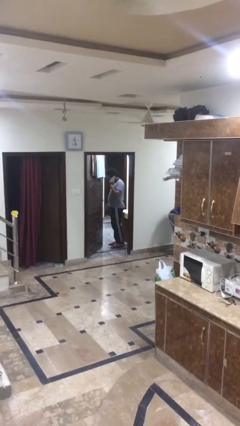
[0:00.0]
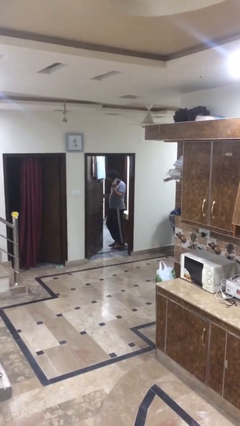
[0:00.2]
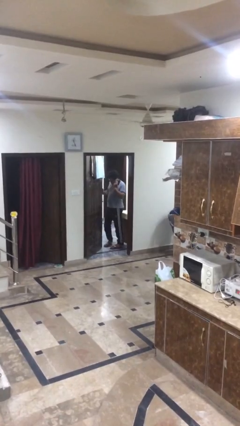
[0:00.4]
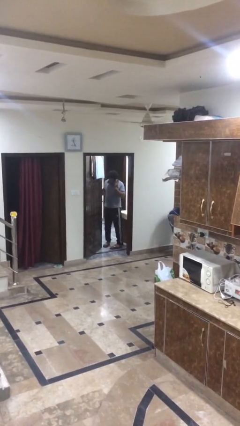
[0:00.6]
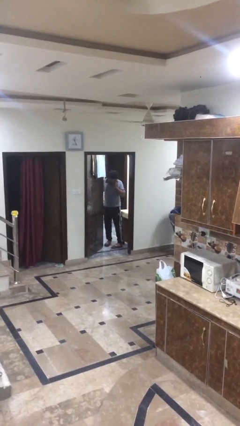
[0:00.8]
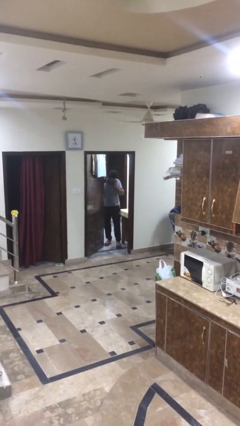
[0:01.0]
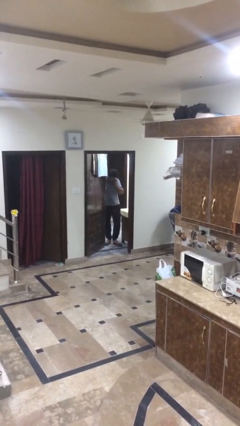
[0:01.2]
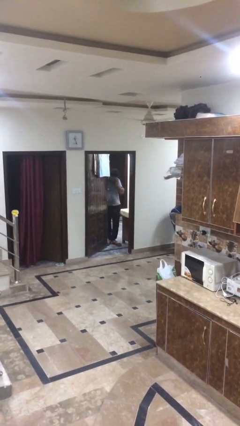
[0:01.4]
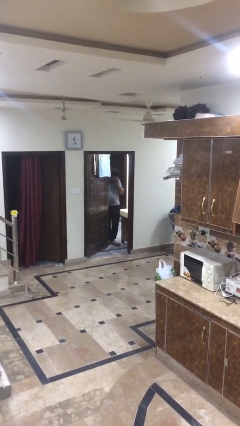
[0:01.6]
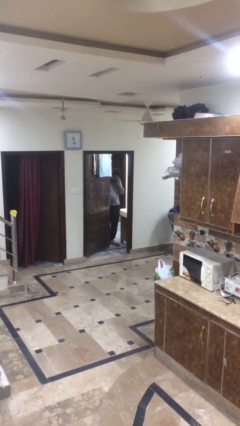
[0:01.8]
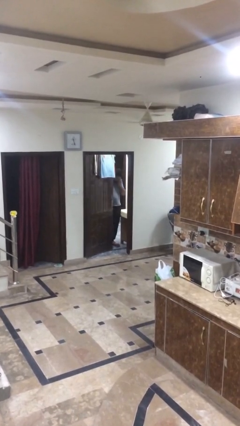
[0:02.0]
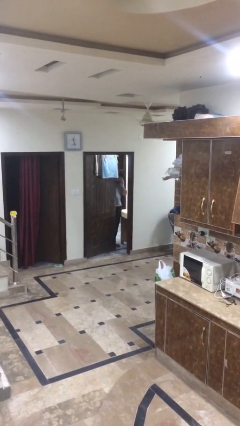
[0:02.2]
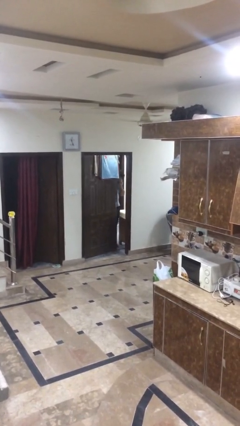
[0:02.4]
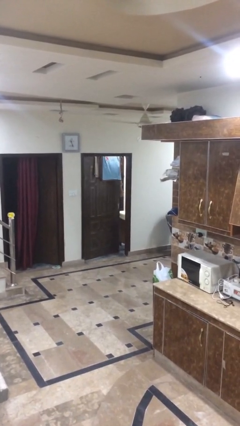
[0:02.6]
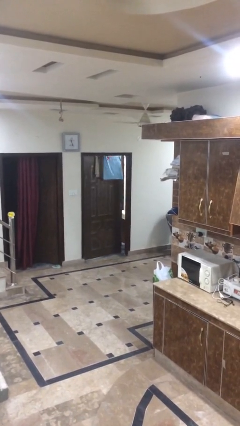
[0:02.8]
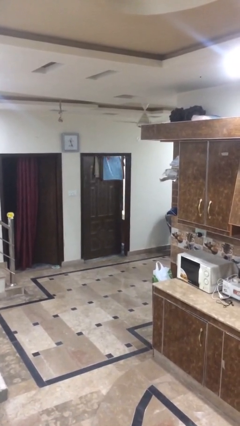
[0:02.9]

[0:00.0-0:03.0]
person closes facility door

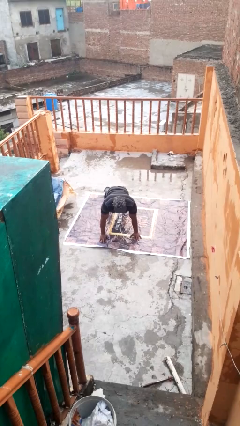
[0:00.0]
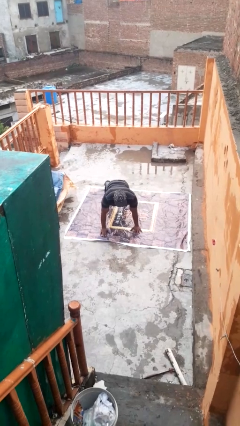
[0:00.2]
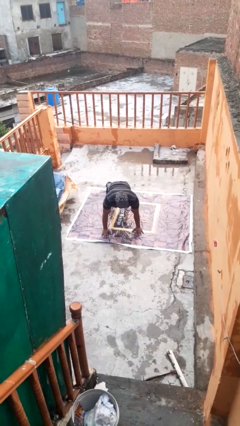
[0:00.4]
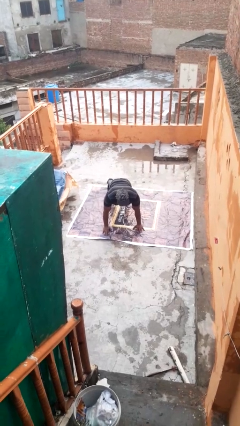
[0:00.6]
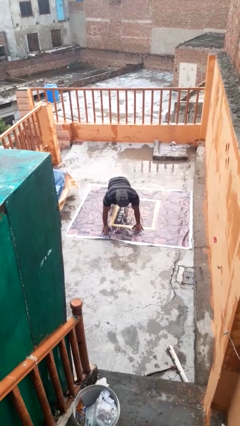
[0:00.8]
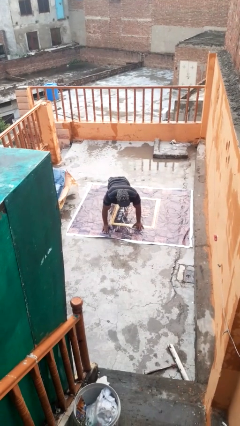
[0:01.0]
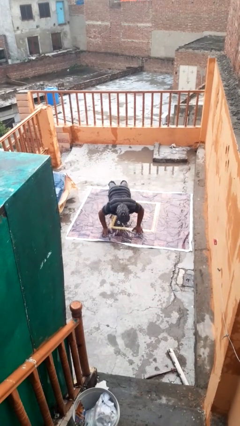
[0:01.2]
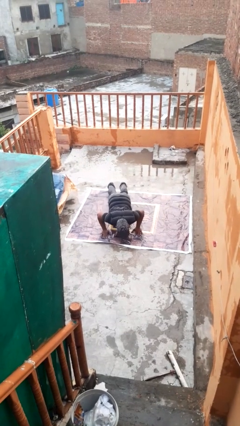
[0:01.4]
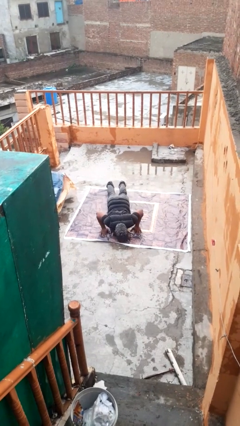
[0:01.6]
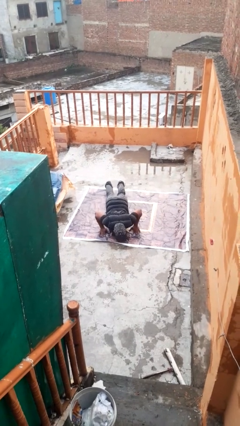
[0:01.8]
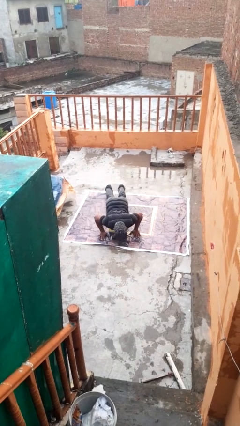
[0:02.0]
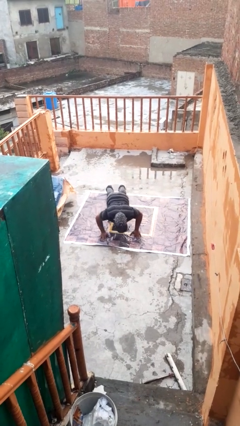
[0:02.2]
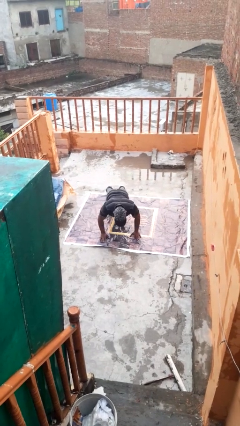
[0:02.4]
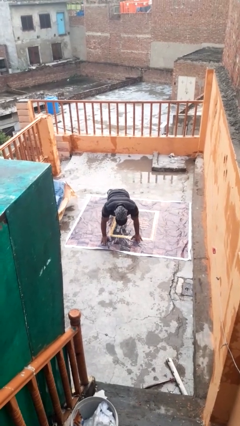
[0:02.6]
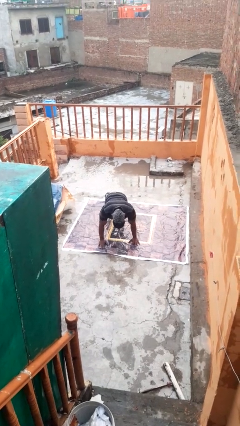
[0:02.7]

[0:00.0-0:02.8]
person exercises with pushup

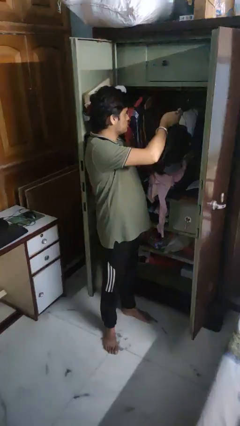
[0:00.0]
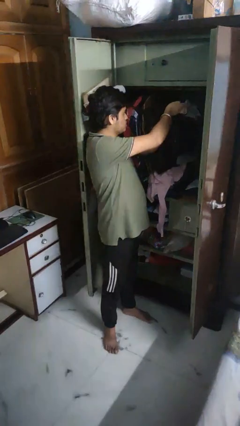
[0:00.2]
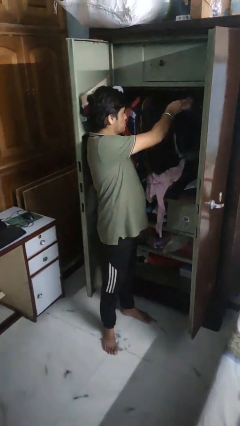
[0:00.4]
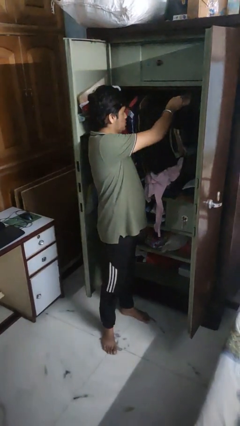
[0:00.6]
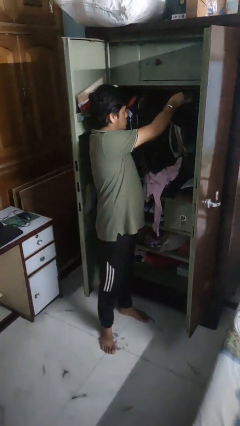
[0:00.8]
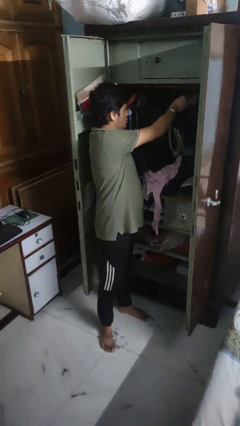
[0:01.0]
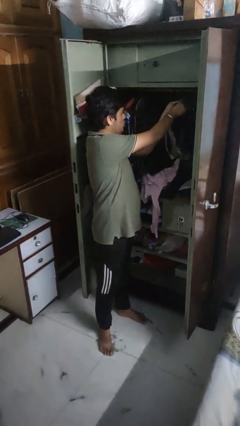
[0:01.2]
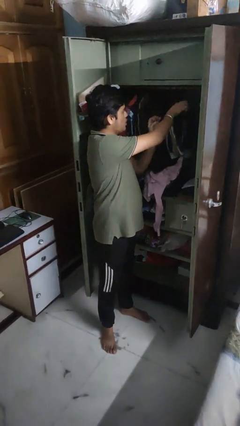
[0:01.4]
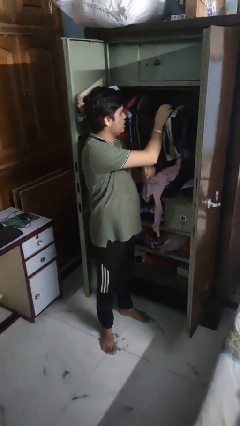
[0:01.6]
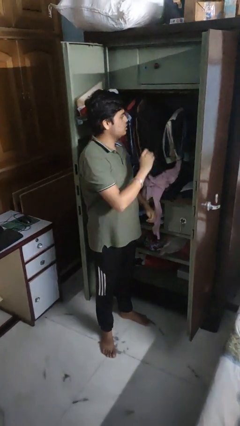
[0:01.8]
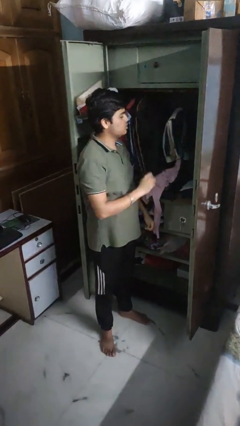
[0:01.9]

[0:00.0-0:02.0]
person puts clothes into closet

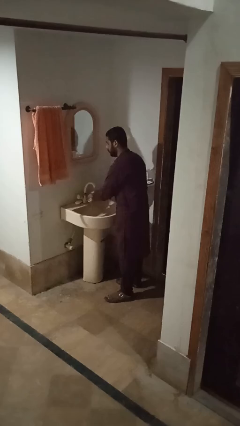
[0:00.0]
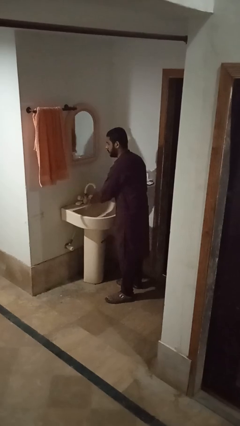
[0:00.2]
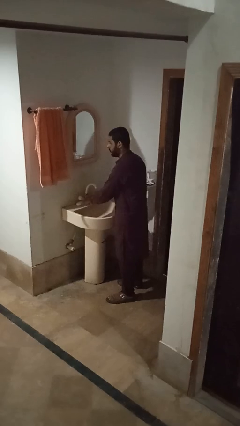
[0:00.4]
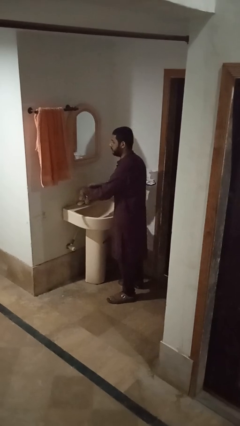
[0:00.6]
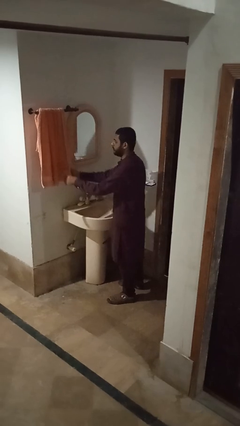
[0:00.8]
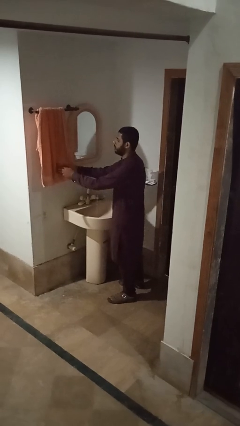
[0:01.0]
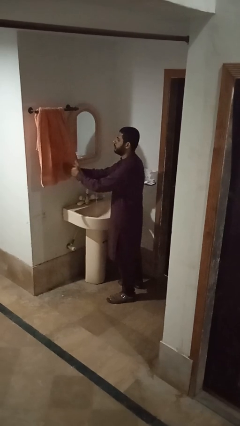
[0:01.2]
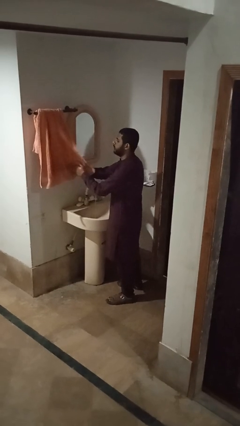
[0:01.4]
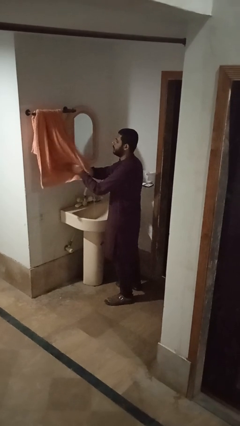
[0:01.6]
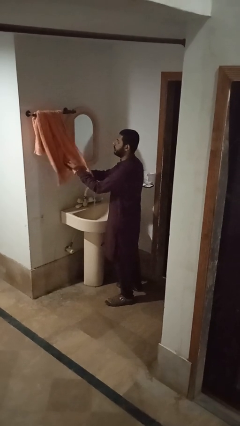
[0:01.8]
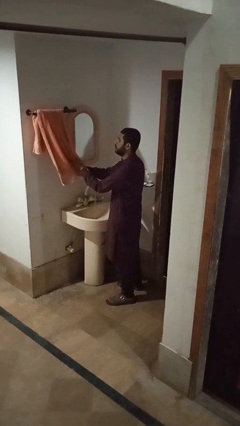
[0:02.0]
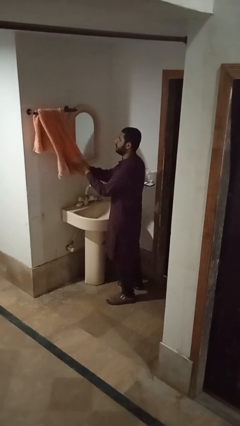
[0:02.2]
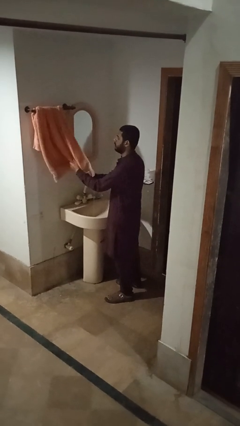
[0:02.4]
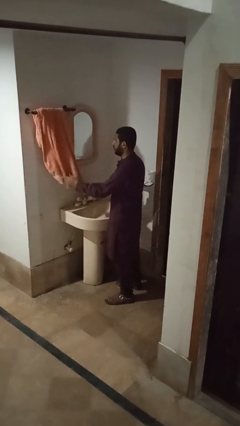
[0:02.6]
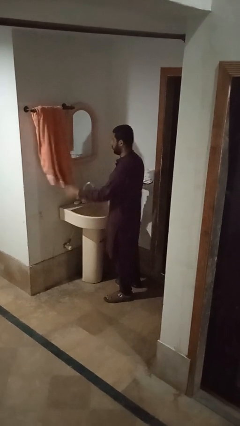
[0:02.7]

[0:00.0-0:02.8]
person dries hands with towel

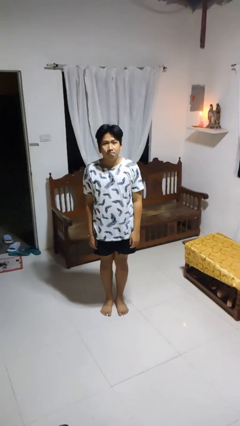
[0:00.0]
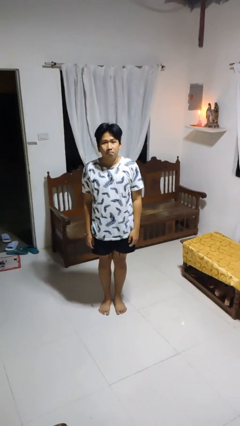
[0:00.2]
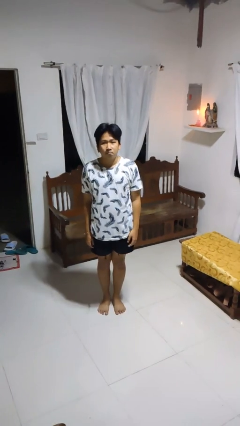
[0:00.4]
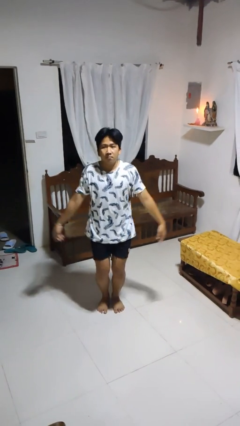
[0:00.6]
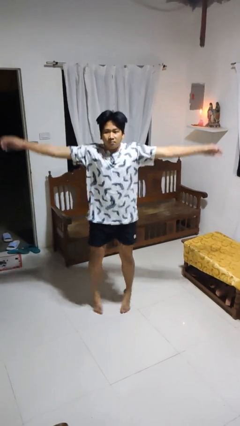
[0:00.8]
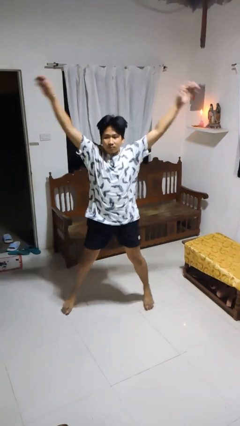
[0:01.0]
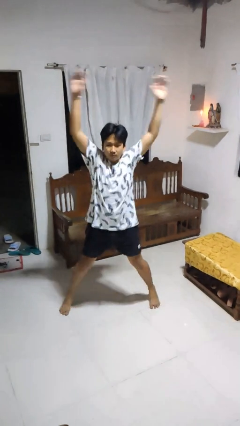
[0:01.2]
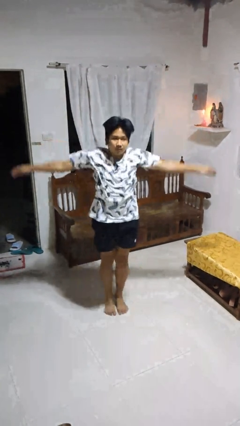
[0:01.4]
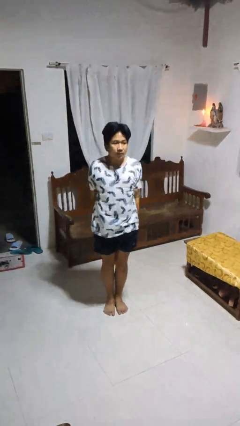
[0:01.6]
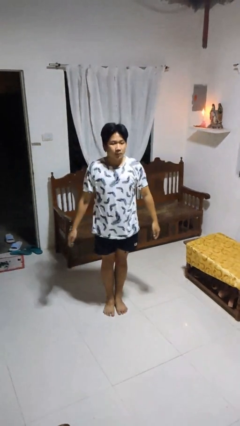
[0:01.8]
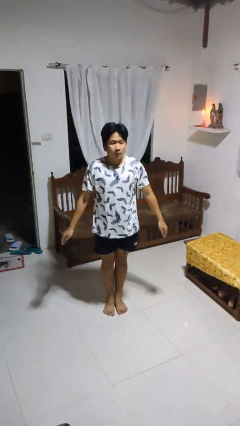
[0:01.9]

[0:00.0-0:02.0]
person exercises with jumping jacks

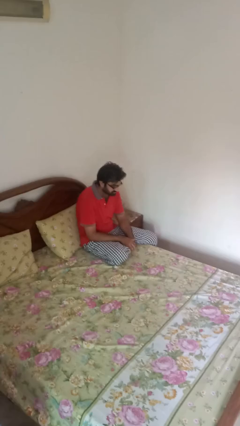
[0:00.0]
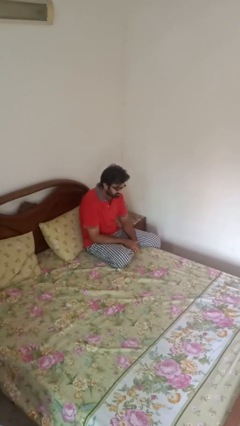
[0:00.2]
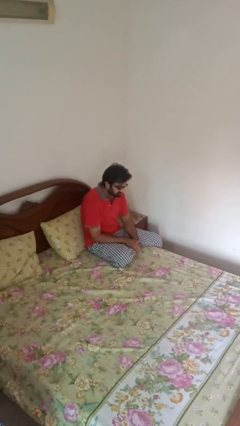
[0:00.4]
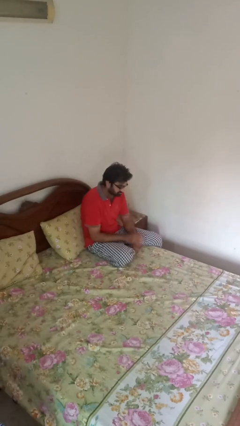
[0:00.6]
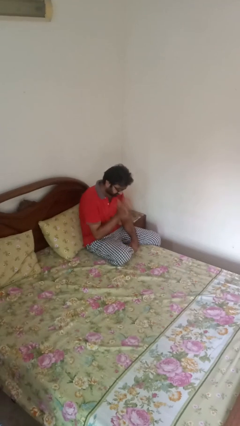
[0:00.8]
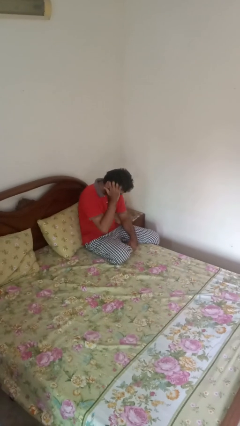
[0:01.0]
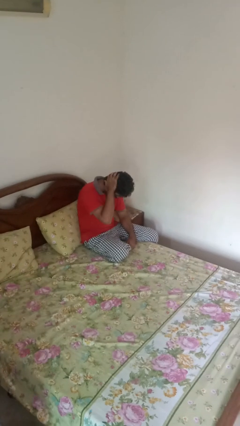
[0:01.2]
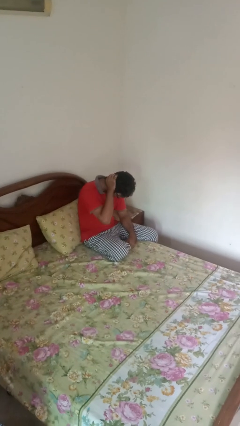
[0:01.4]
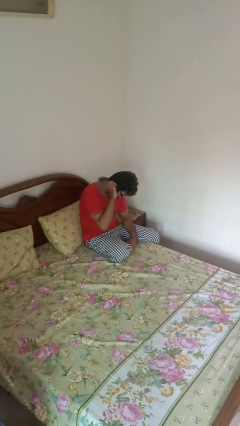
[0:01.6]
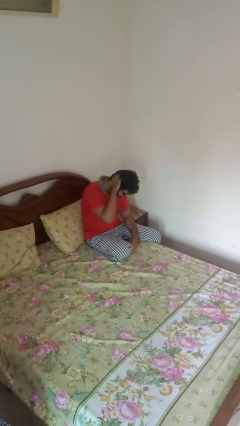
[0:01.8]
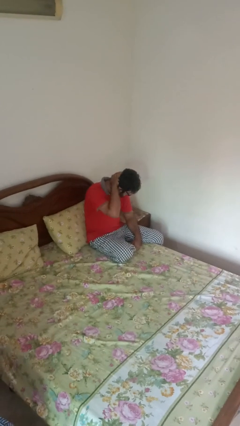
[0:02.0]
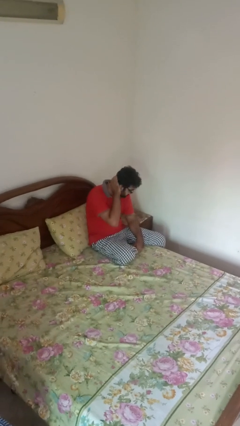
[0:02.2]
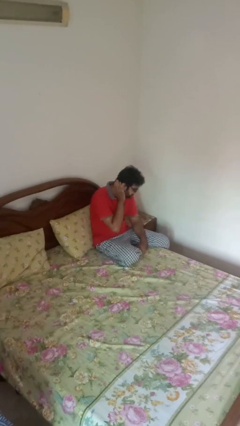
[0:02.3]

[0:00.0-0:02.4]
person strokes hair

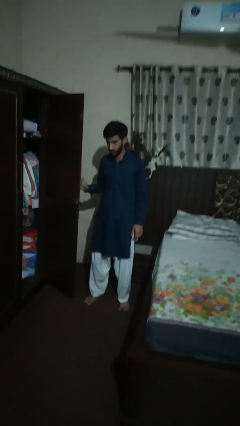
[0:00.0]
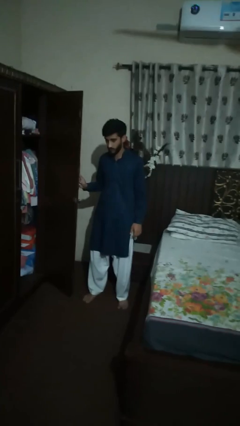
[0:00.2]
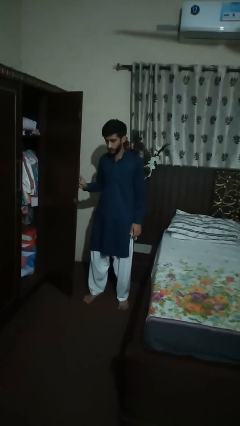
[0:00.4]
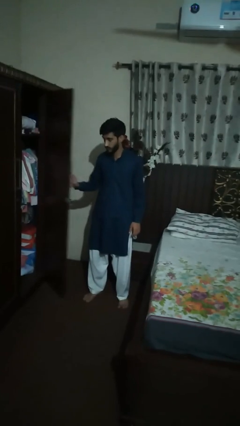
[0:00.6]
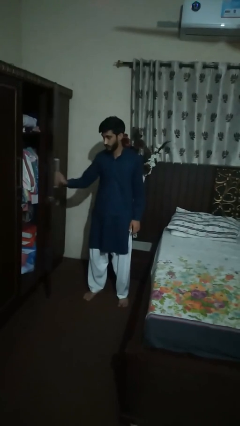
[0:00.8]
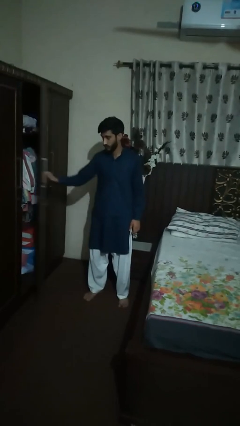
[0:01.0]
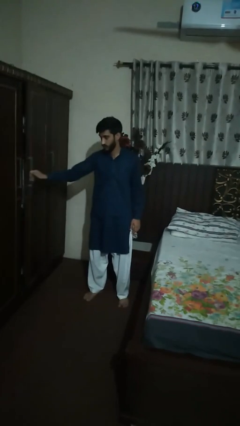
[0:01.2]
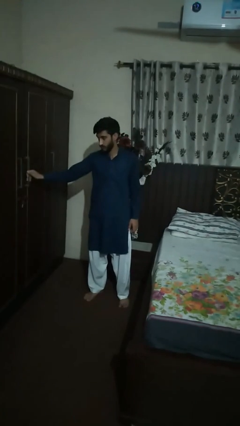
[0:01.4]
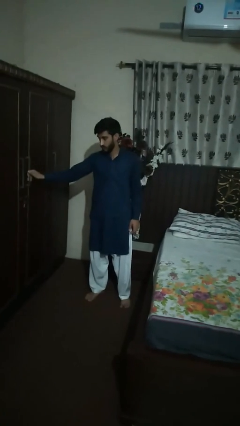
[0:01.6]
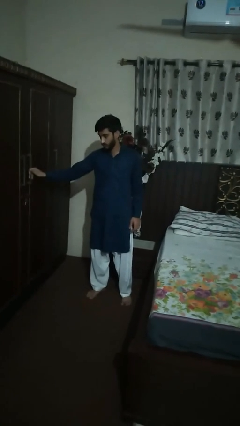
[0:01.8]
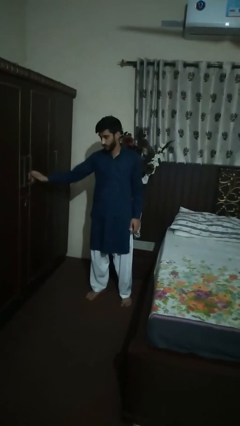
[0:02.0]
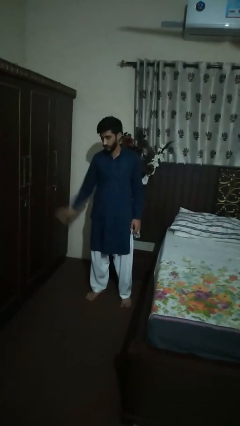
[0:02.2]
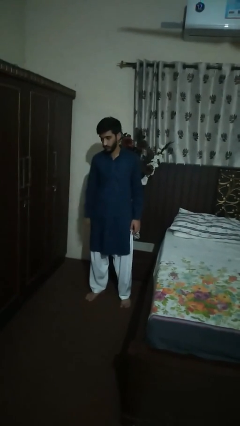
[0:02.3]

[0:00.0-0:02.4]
person closes dresser drawer
